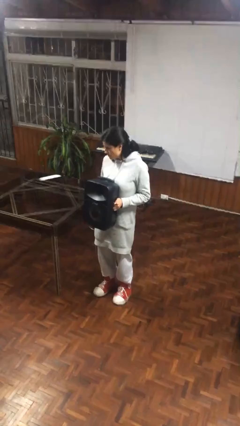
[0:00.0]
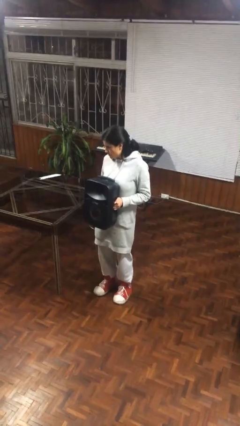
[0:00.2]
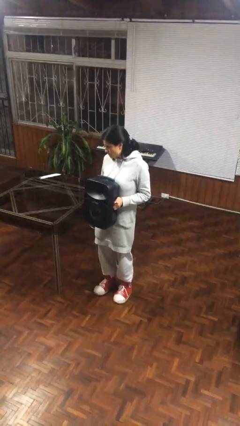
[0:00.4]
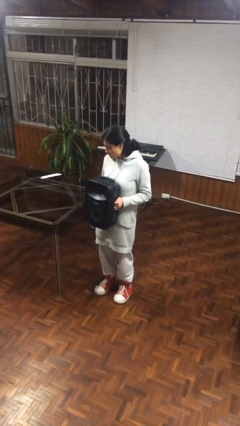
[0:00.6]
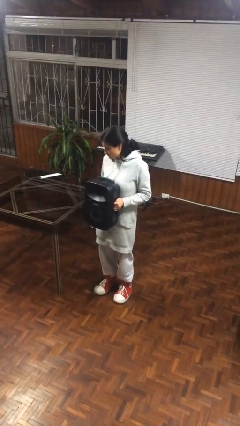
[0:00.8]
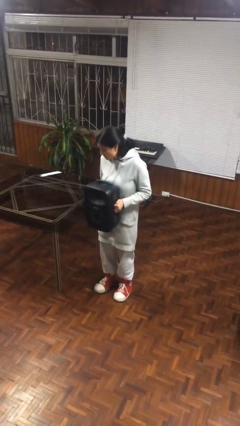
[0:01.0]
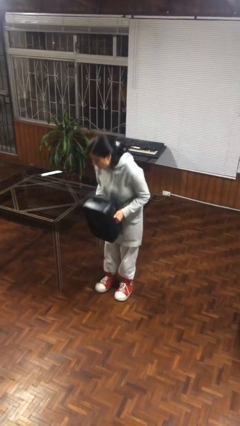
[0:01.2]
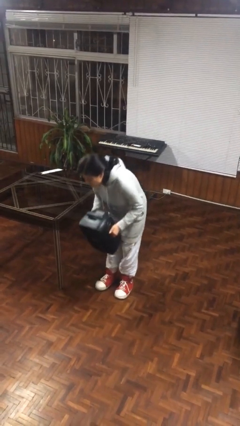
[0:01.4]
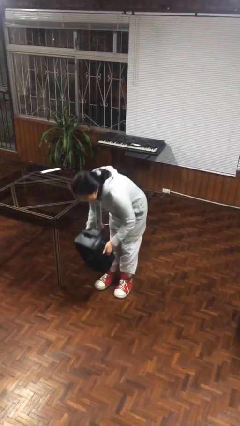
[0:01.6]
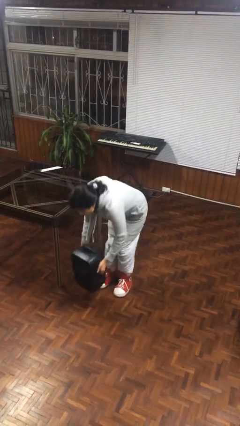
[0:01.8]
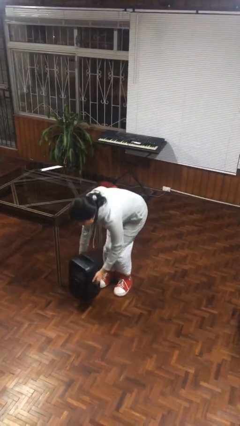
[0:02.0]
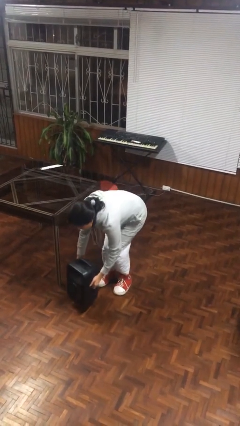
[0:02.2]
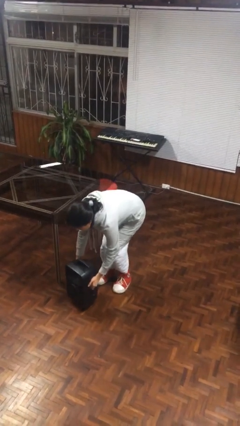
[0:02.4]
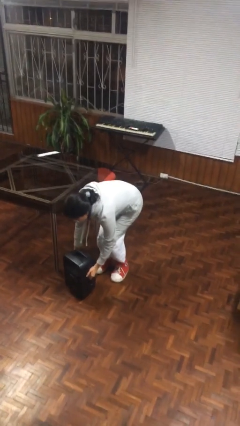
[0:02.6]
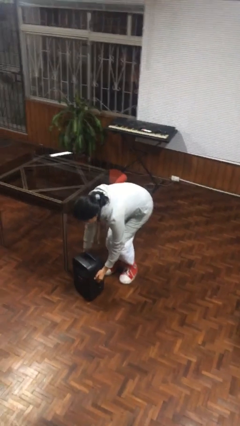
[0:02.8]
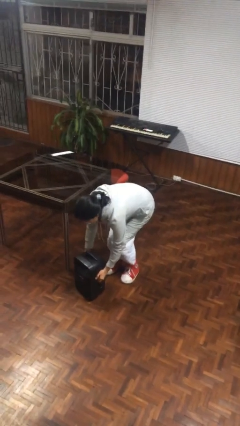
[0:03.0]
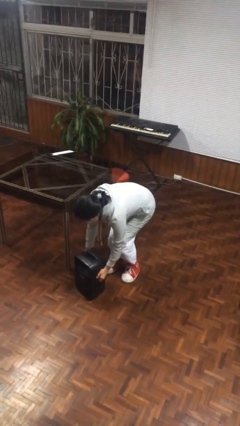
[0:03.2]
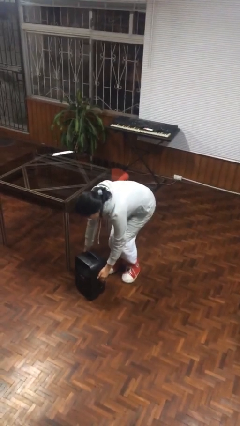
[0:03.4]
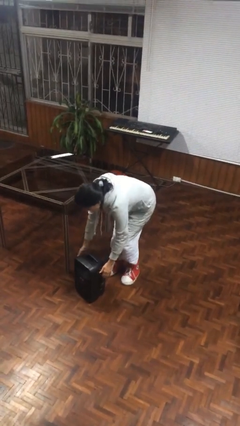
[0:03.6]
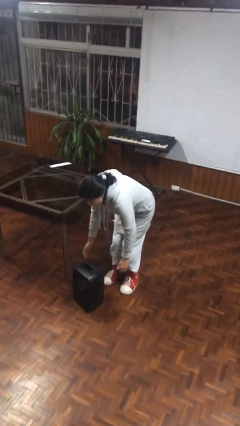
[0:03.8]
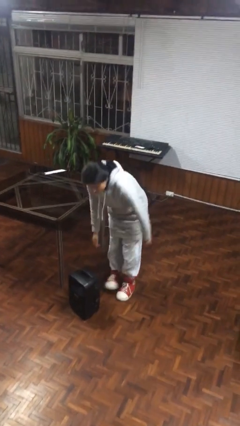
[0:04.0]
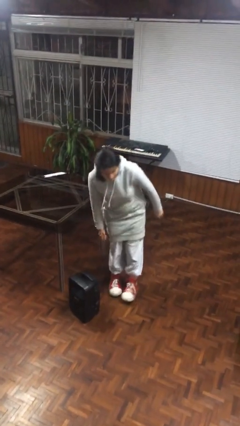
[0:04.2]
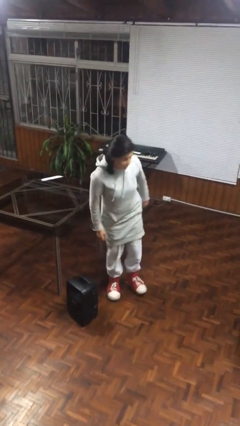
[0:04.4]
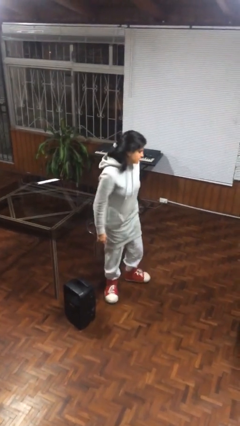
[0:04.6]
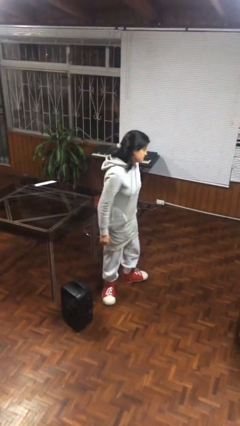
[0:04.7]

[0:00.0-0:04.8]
person puts down object on floor

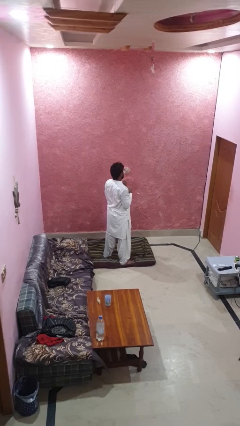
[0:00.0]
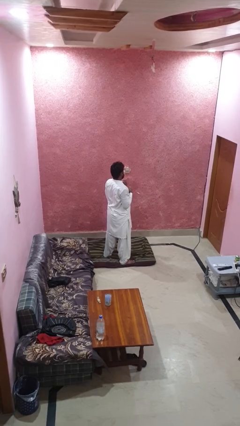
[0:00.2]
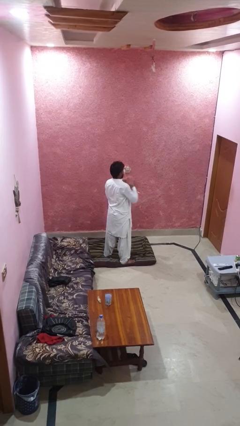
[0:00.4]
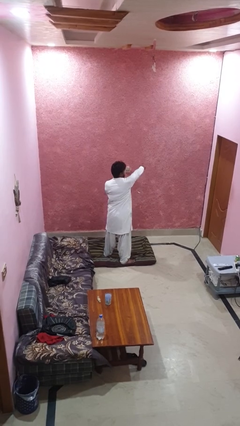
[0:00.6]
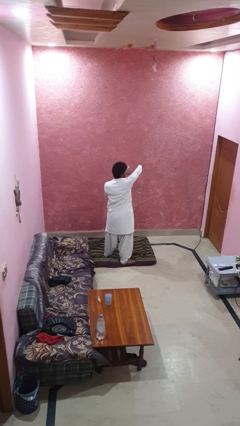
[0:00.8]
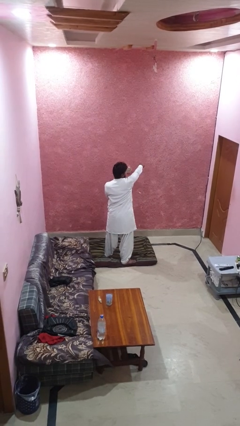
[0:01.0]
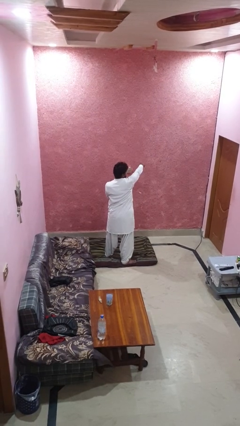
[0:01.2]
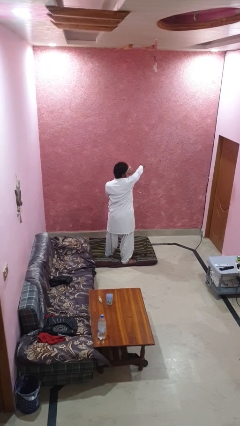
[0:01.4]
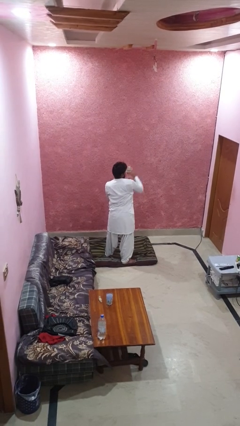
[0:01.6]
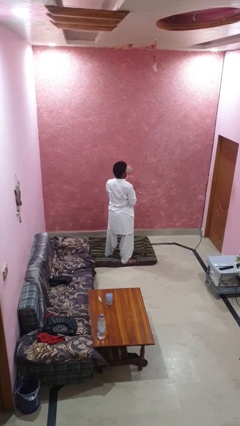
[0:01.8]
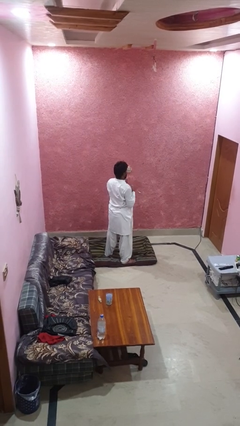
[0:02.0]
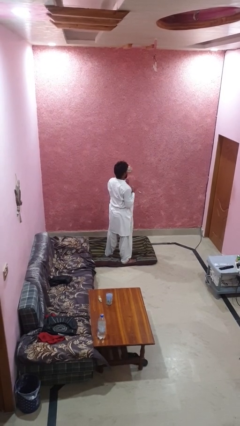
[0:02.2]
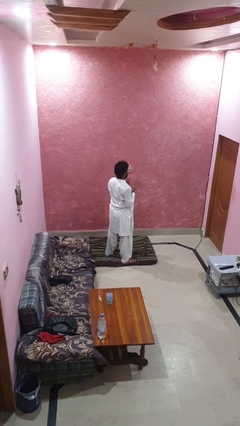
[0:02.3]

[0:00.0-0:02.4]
person punches

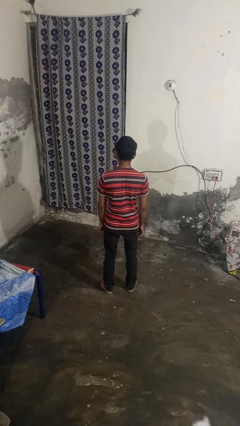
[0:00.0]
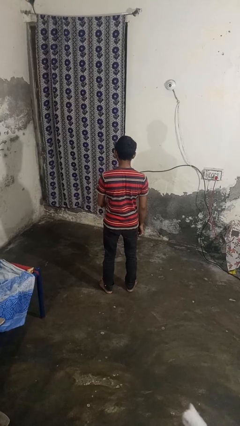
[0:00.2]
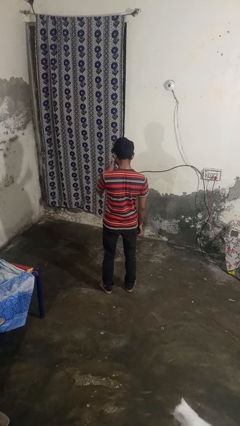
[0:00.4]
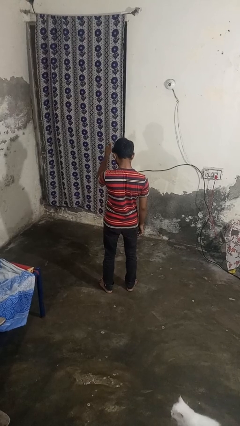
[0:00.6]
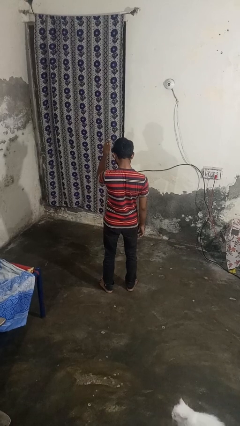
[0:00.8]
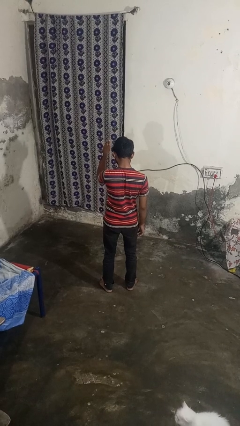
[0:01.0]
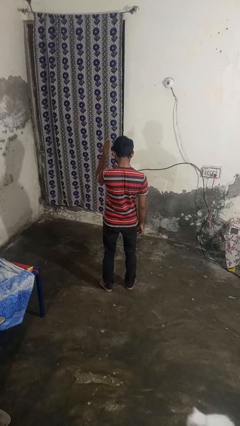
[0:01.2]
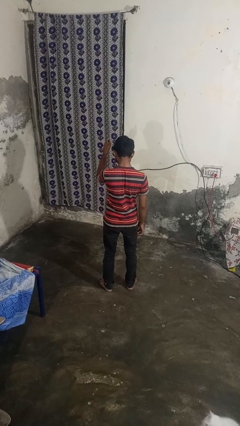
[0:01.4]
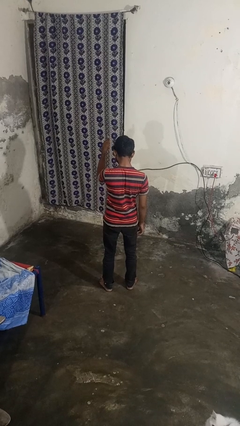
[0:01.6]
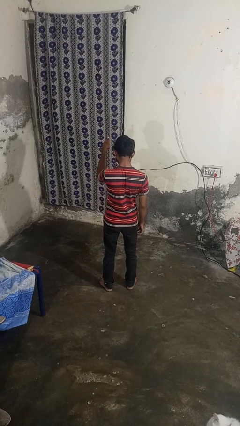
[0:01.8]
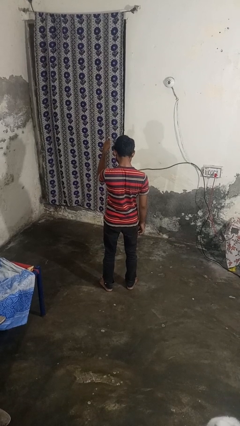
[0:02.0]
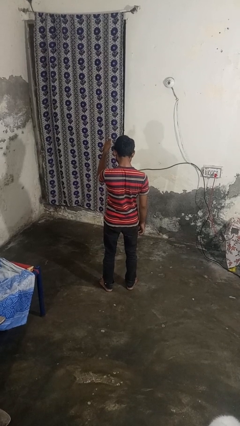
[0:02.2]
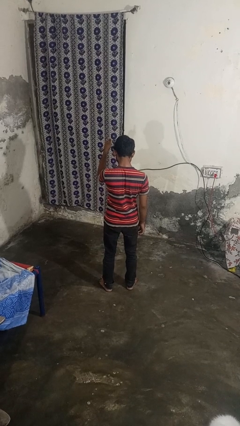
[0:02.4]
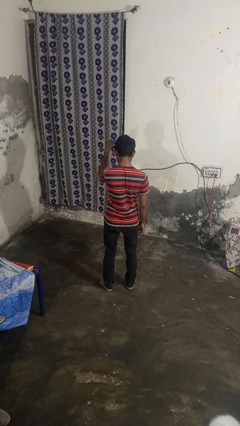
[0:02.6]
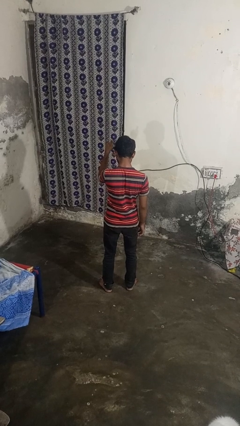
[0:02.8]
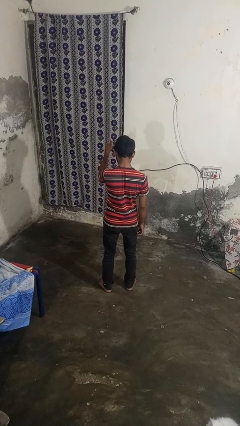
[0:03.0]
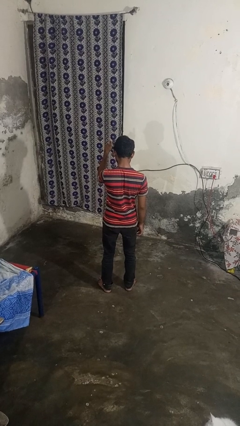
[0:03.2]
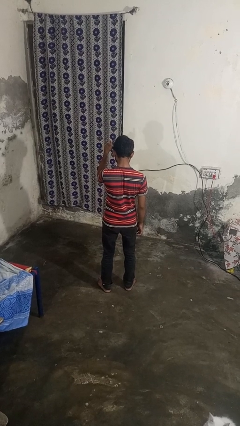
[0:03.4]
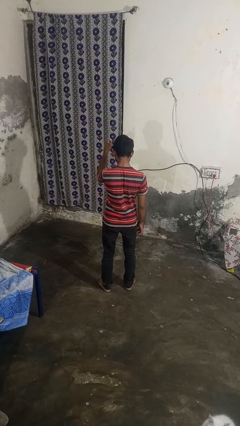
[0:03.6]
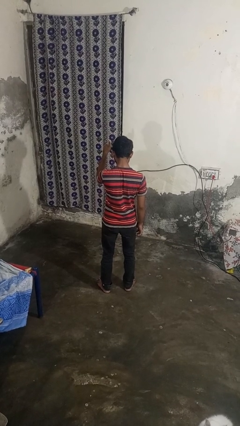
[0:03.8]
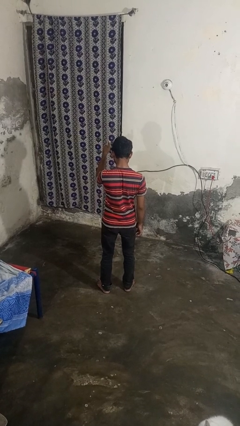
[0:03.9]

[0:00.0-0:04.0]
person gestures thumbs up

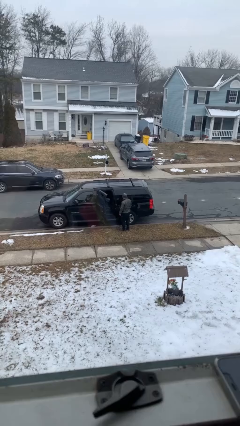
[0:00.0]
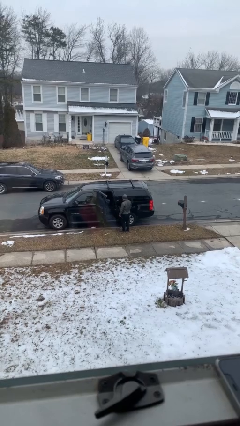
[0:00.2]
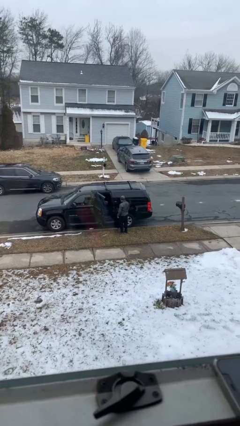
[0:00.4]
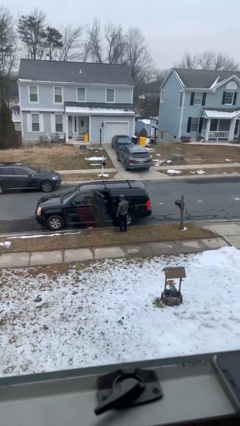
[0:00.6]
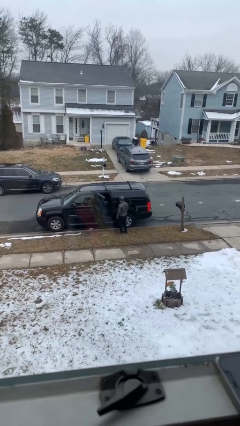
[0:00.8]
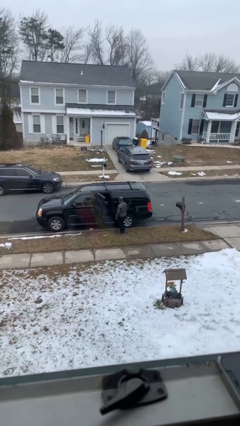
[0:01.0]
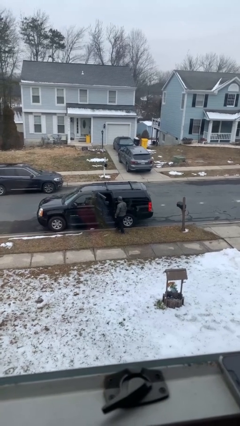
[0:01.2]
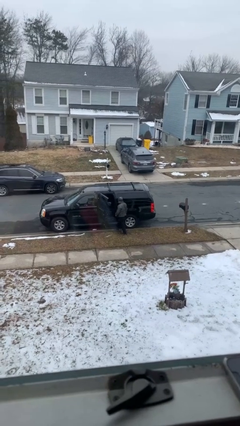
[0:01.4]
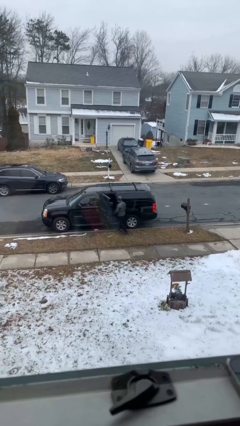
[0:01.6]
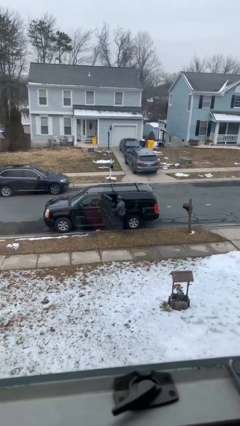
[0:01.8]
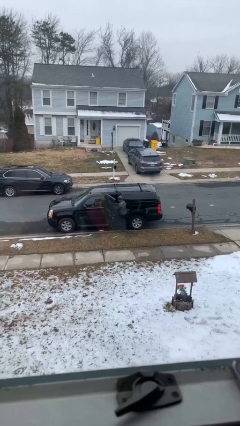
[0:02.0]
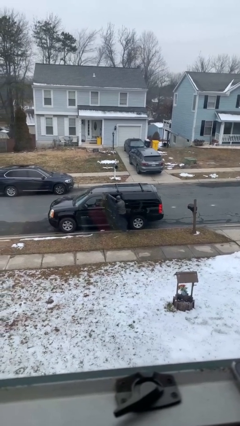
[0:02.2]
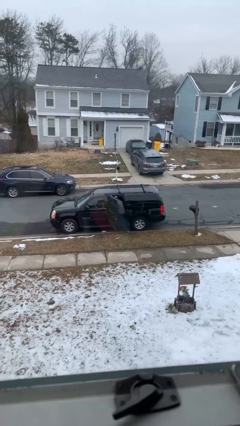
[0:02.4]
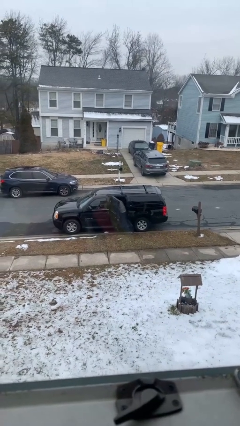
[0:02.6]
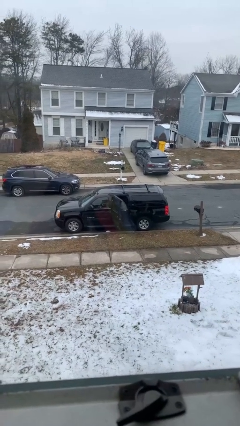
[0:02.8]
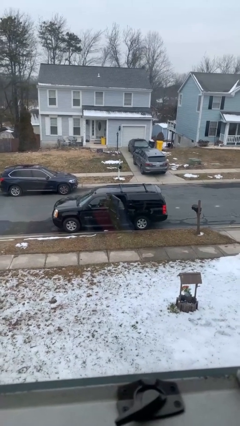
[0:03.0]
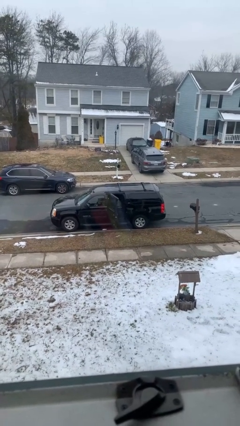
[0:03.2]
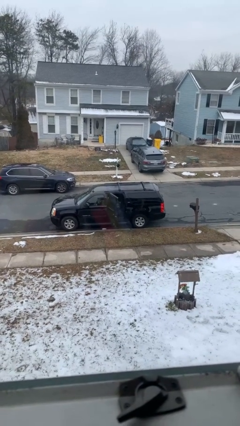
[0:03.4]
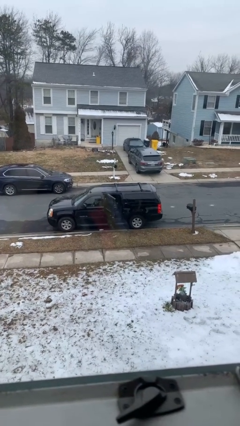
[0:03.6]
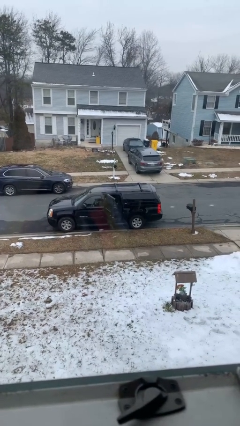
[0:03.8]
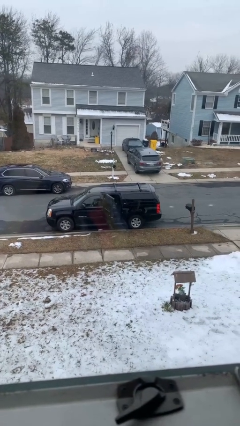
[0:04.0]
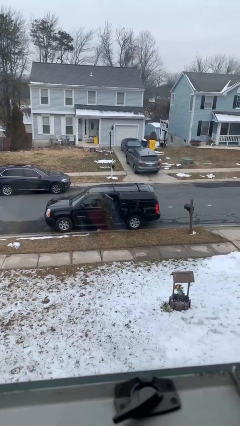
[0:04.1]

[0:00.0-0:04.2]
person enters car

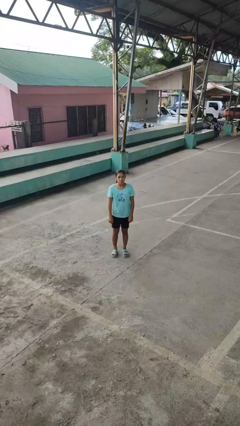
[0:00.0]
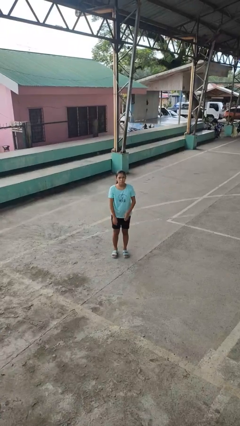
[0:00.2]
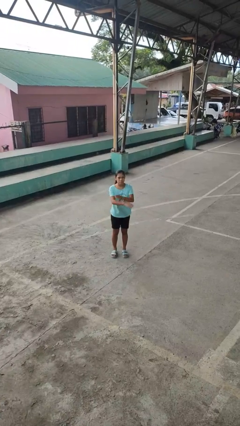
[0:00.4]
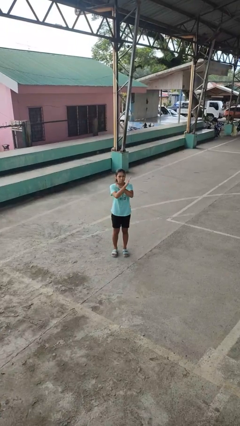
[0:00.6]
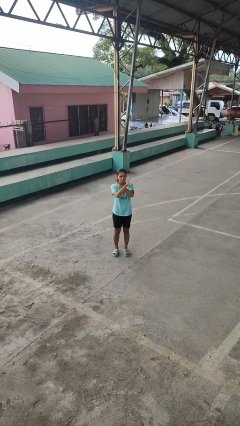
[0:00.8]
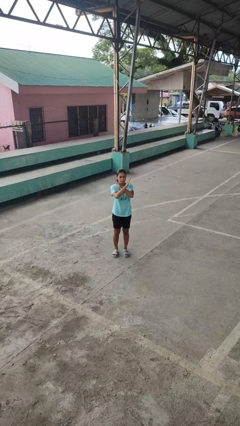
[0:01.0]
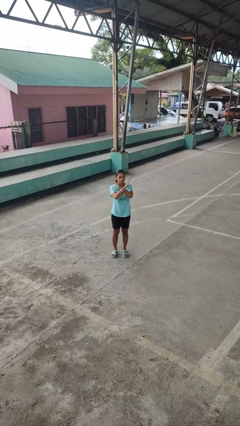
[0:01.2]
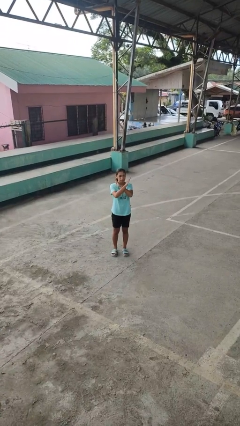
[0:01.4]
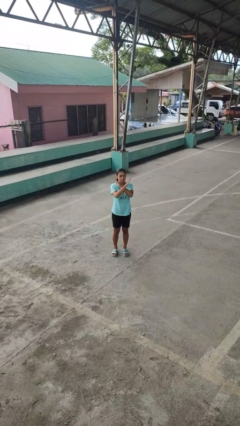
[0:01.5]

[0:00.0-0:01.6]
person gestures arms x

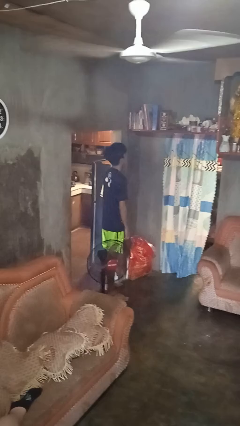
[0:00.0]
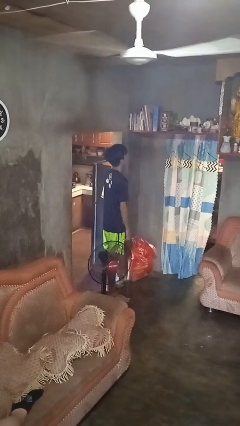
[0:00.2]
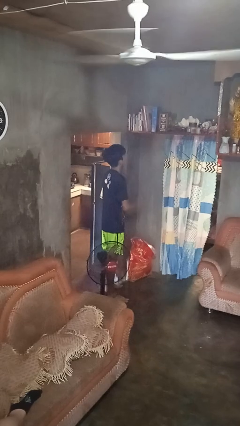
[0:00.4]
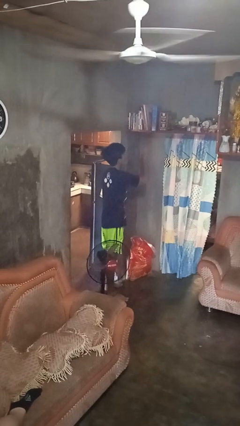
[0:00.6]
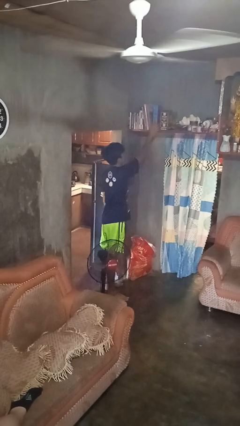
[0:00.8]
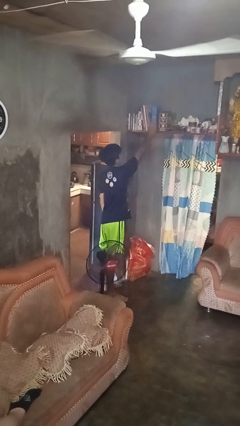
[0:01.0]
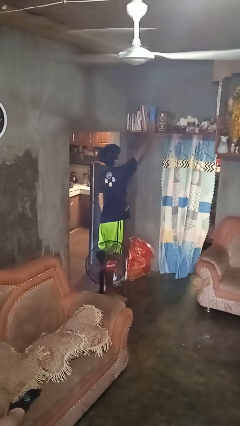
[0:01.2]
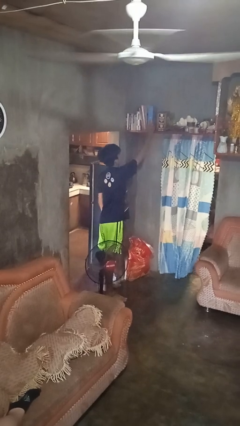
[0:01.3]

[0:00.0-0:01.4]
person picks up object from shelf
